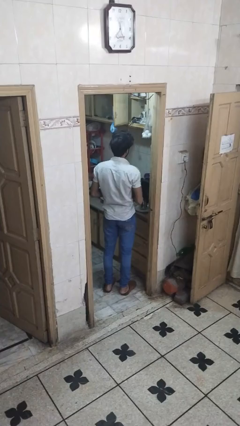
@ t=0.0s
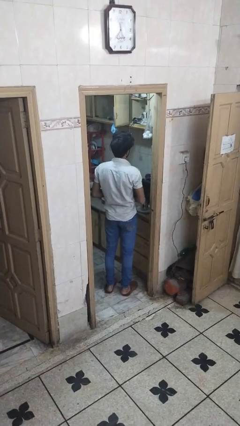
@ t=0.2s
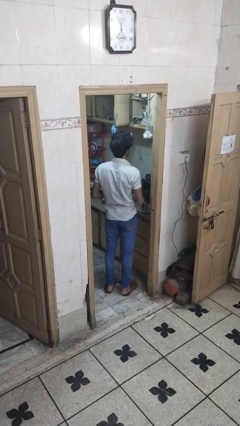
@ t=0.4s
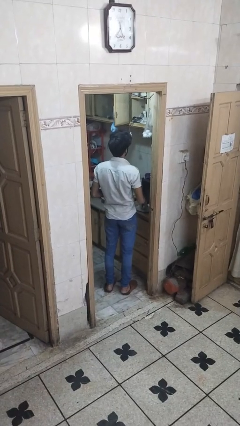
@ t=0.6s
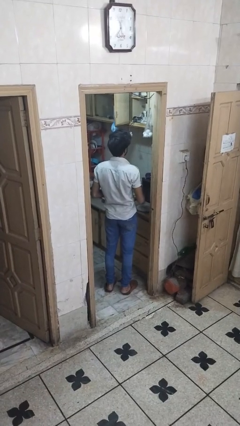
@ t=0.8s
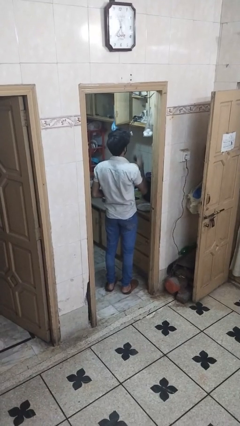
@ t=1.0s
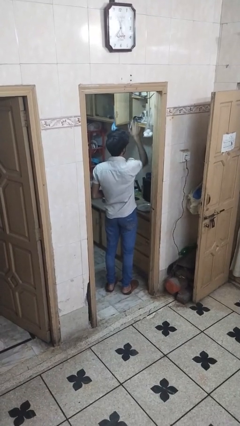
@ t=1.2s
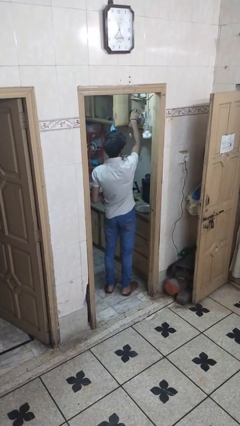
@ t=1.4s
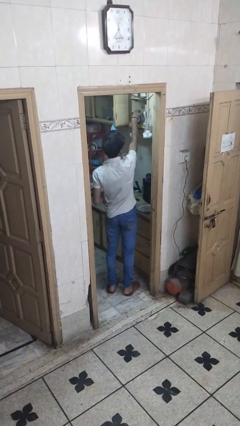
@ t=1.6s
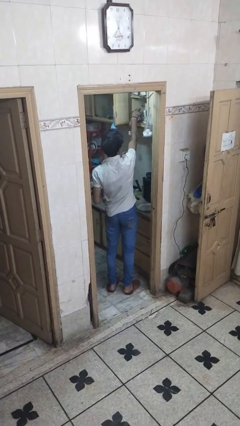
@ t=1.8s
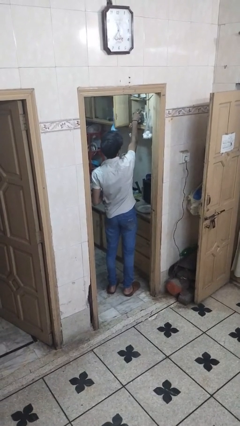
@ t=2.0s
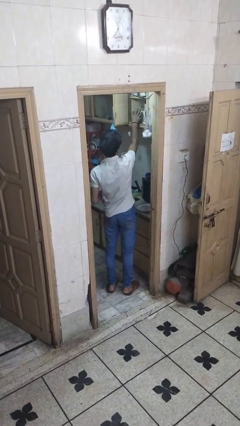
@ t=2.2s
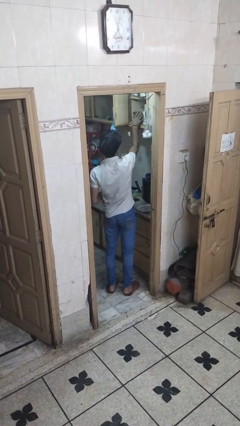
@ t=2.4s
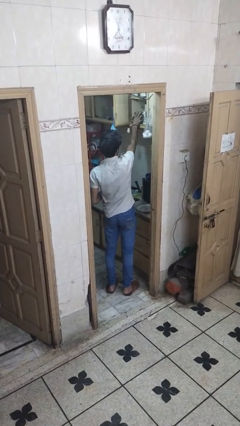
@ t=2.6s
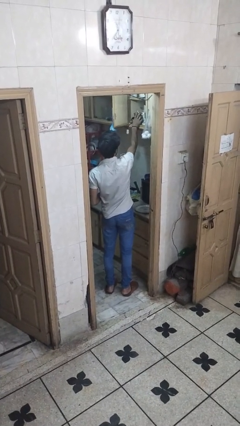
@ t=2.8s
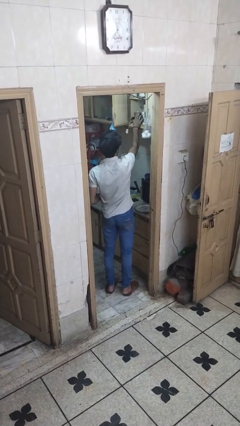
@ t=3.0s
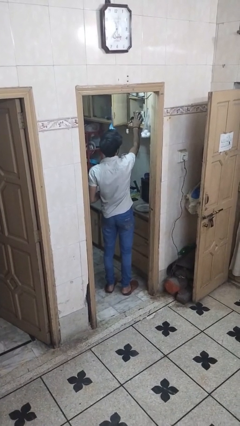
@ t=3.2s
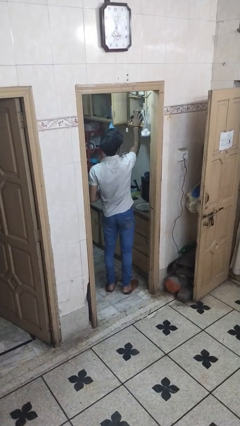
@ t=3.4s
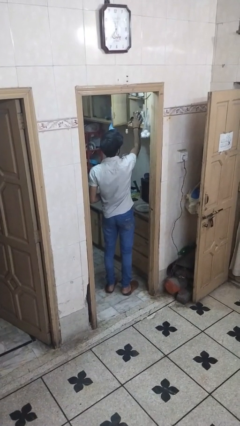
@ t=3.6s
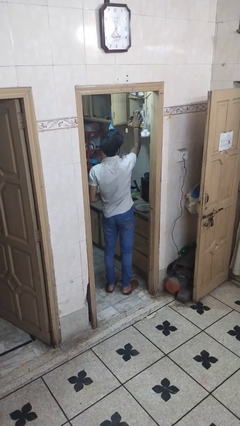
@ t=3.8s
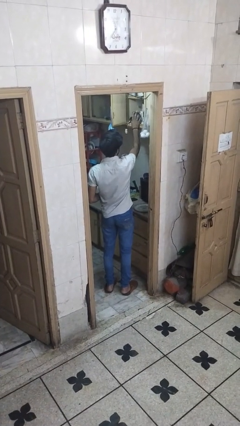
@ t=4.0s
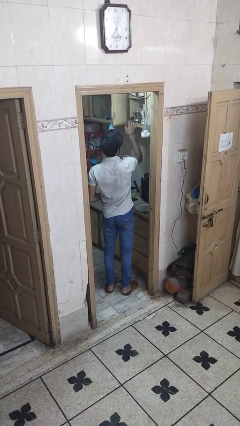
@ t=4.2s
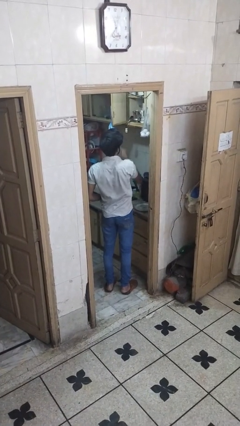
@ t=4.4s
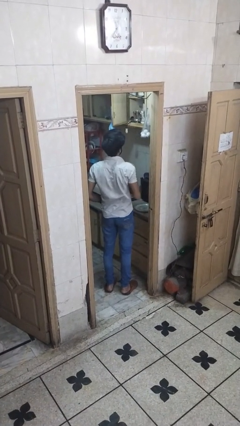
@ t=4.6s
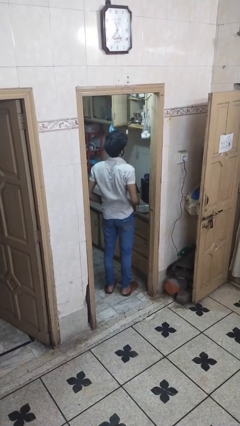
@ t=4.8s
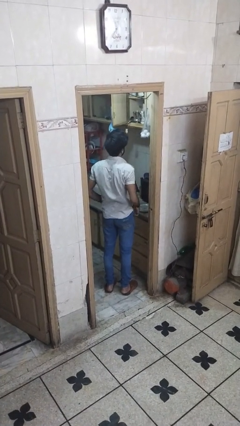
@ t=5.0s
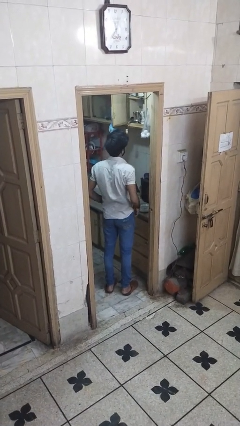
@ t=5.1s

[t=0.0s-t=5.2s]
person puts object in cabinet

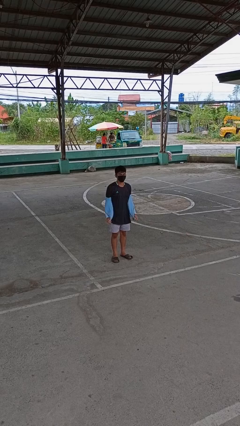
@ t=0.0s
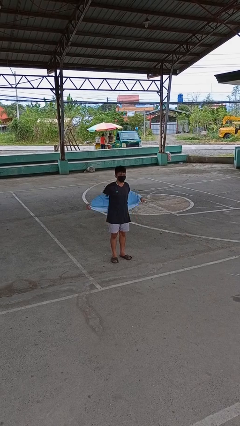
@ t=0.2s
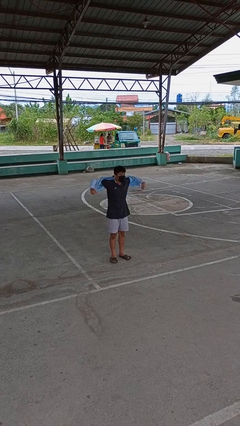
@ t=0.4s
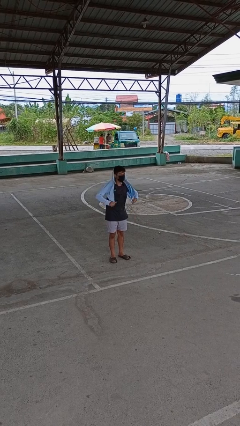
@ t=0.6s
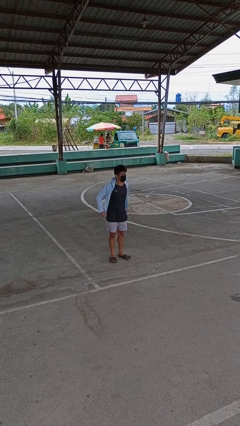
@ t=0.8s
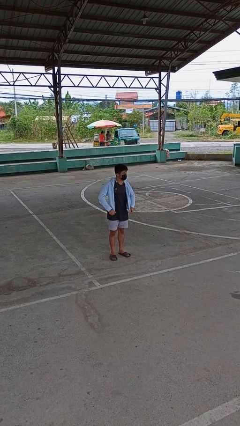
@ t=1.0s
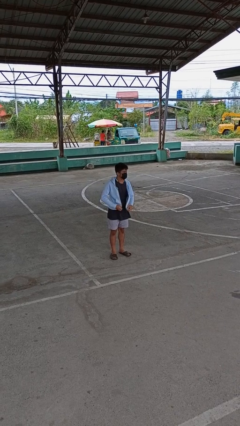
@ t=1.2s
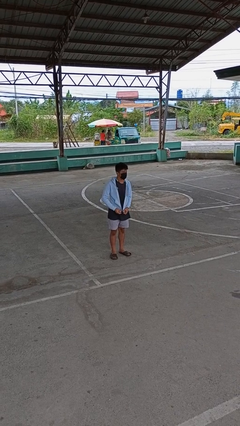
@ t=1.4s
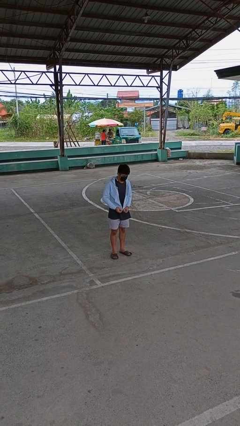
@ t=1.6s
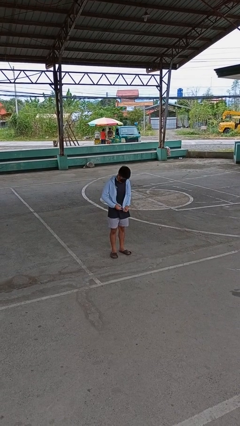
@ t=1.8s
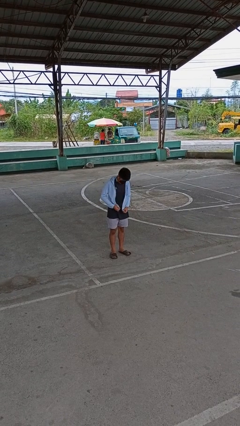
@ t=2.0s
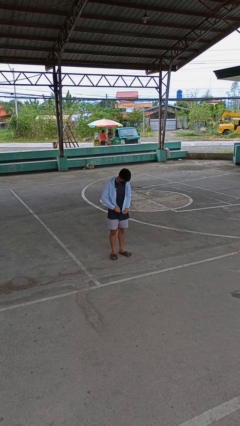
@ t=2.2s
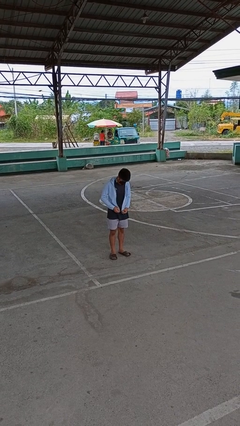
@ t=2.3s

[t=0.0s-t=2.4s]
person puts on jacket

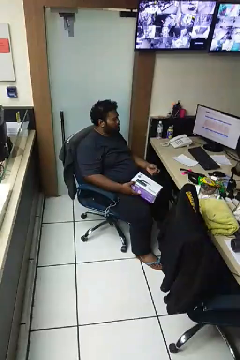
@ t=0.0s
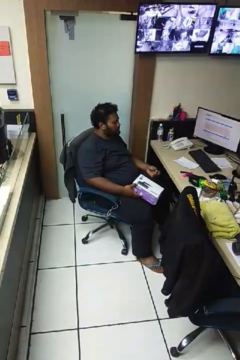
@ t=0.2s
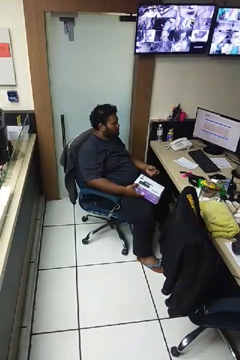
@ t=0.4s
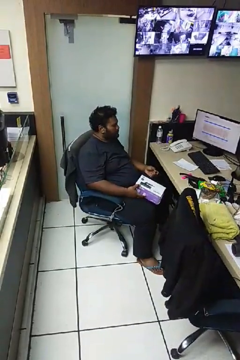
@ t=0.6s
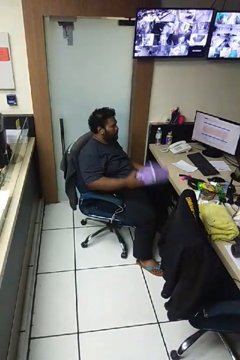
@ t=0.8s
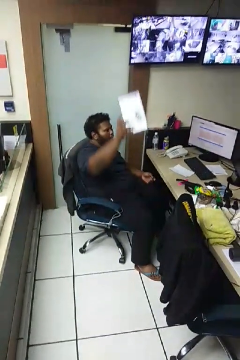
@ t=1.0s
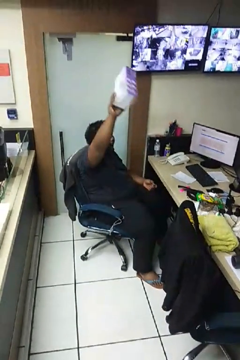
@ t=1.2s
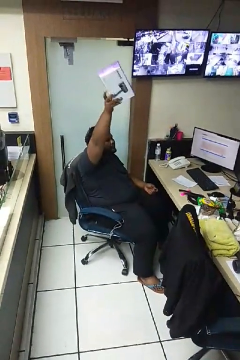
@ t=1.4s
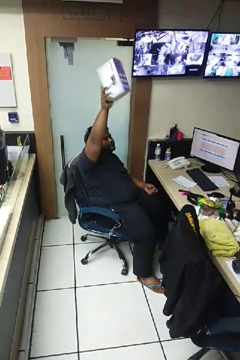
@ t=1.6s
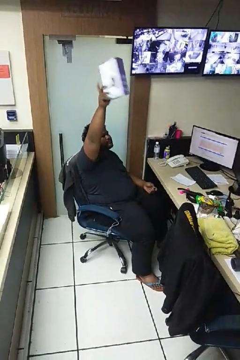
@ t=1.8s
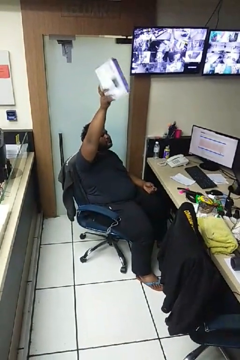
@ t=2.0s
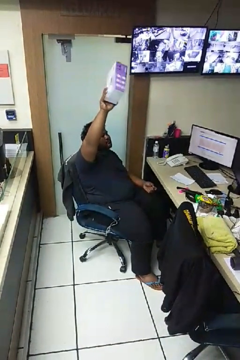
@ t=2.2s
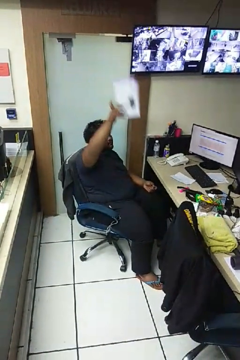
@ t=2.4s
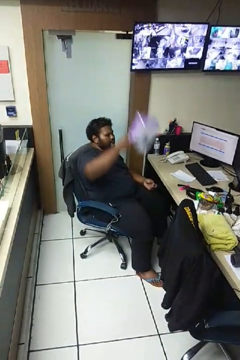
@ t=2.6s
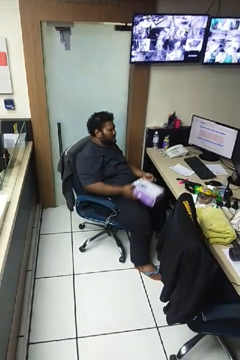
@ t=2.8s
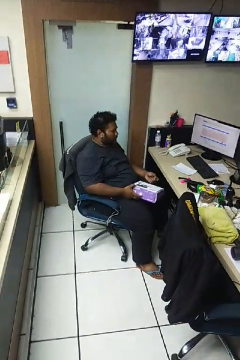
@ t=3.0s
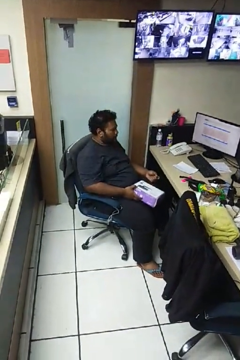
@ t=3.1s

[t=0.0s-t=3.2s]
person holds object above head

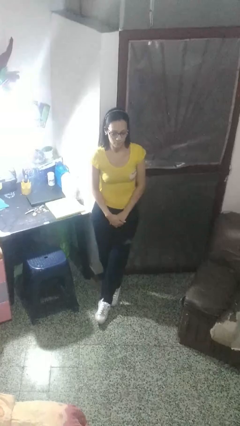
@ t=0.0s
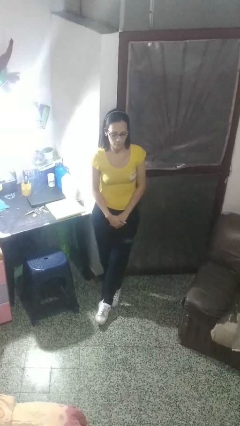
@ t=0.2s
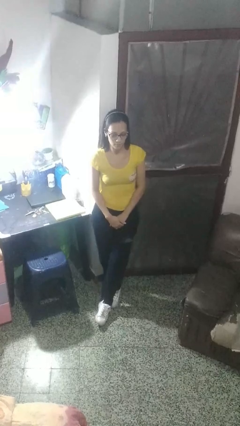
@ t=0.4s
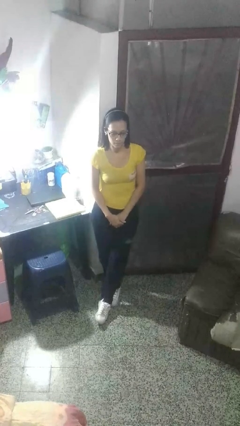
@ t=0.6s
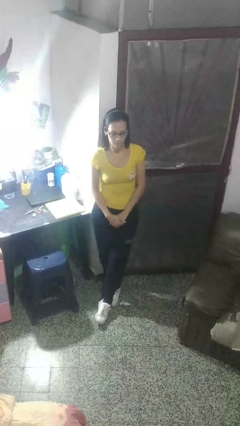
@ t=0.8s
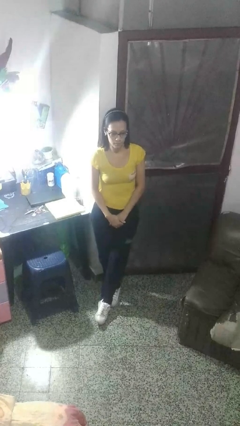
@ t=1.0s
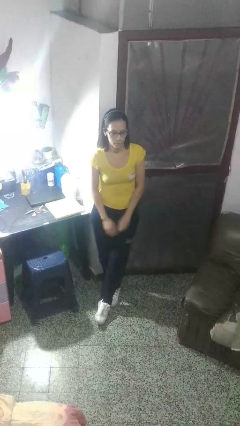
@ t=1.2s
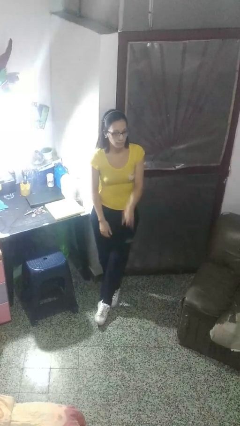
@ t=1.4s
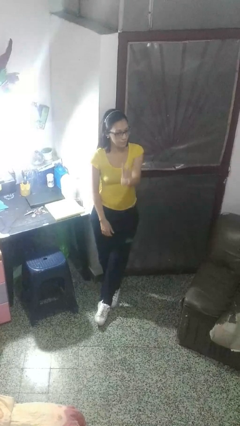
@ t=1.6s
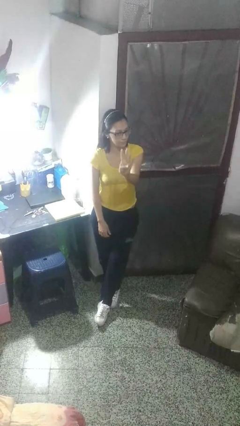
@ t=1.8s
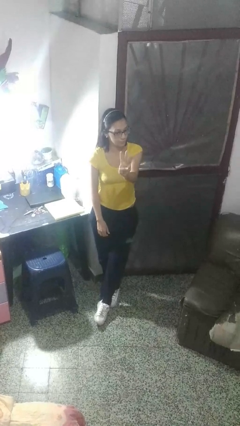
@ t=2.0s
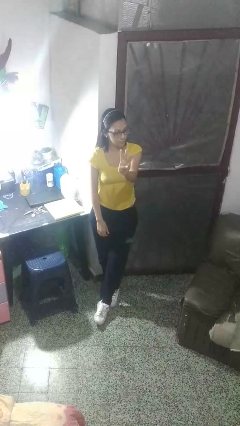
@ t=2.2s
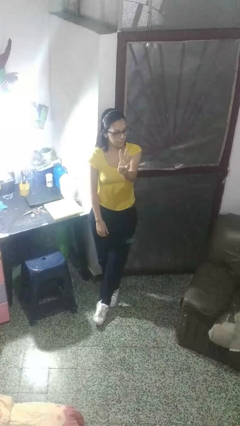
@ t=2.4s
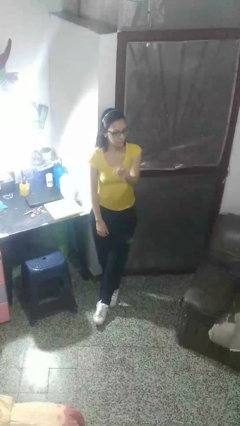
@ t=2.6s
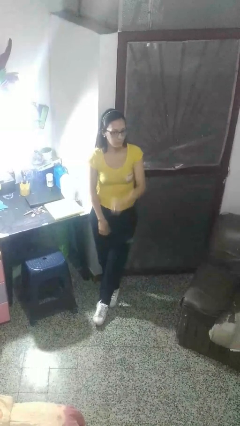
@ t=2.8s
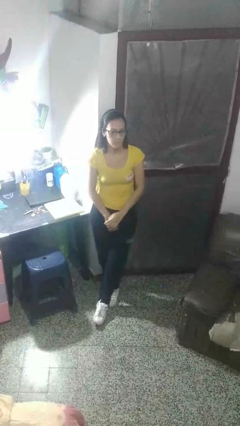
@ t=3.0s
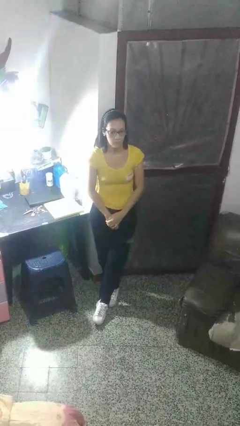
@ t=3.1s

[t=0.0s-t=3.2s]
person gestures number three

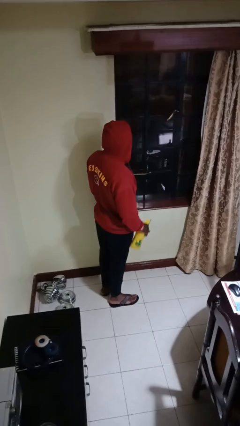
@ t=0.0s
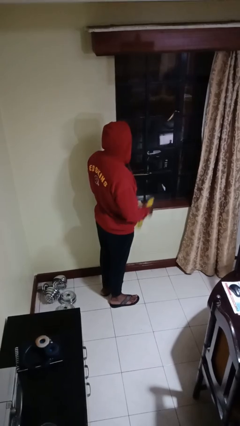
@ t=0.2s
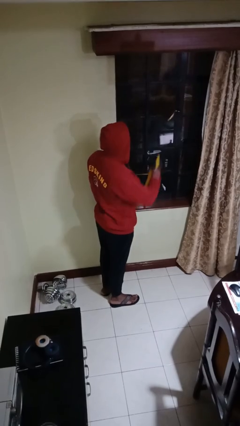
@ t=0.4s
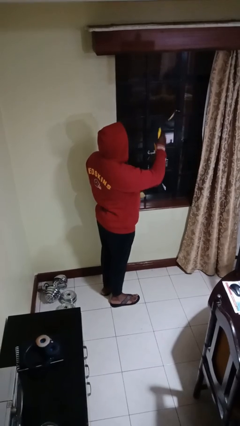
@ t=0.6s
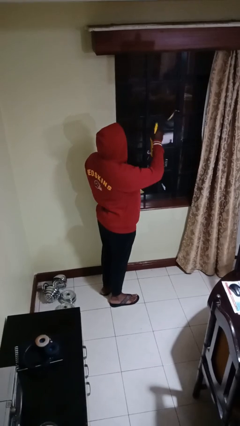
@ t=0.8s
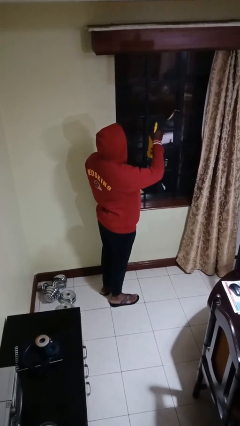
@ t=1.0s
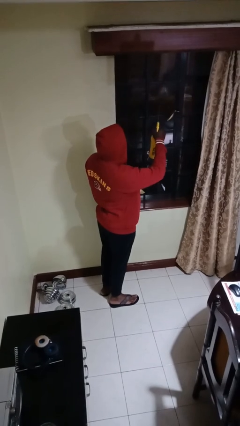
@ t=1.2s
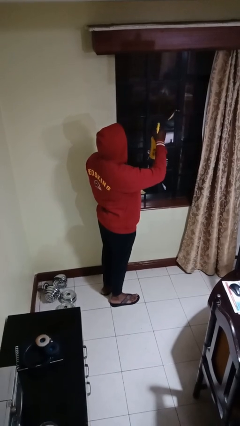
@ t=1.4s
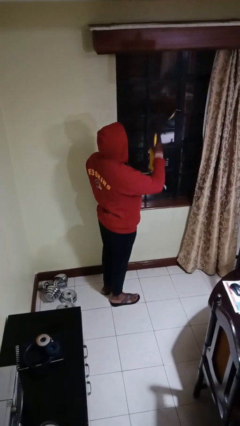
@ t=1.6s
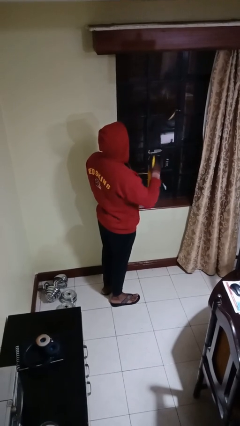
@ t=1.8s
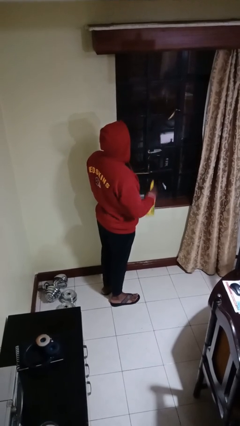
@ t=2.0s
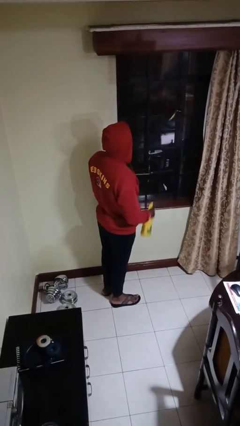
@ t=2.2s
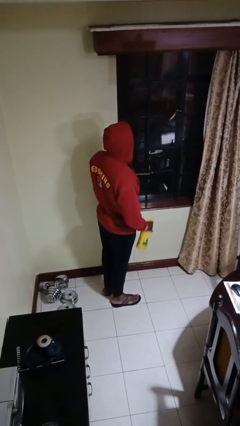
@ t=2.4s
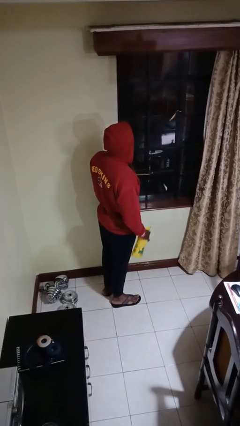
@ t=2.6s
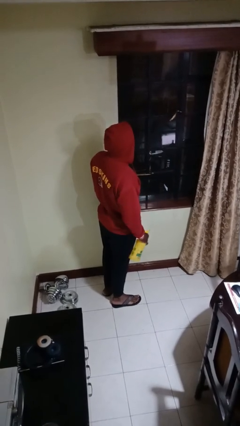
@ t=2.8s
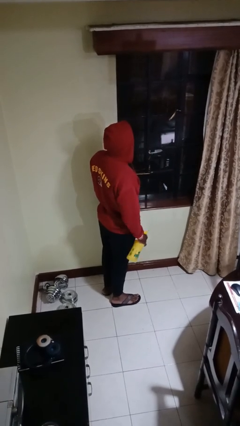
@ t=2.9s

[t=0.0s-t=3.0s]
person sprays from bottle

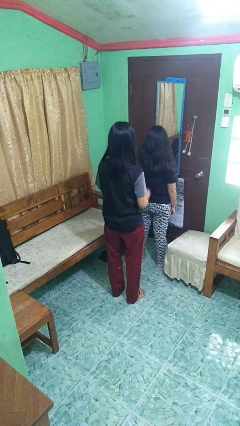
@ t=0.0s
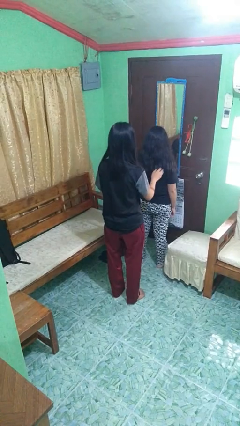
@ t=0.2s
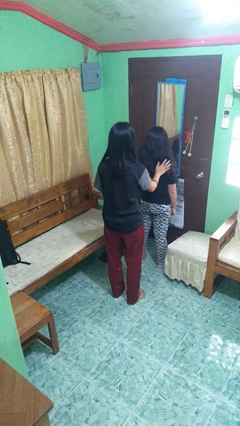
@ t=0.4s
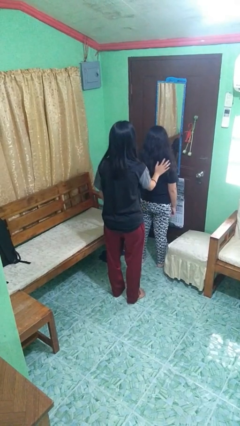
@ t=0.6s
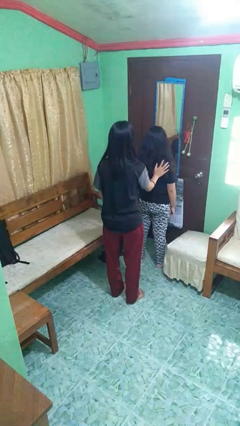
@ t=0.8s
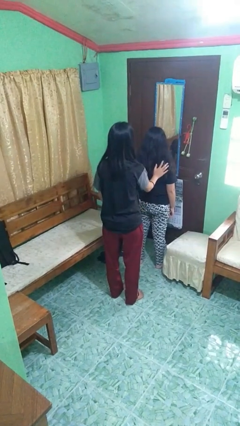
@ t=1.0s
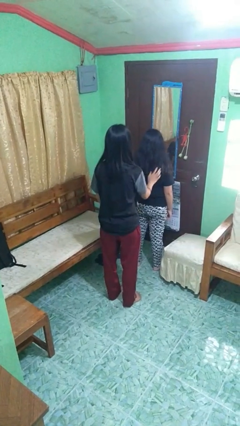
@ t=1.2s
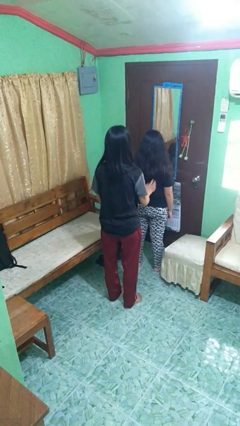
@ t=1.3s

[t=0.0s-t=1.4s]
person touches back of person
